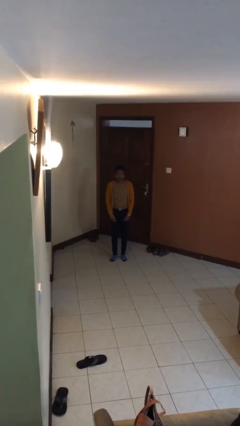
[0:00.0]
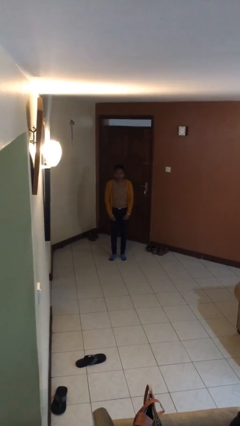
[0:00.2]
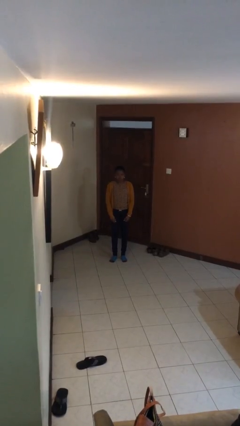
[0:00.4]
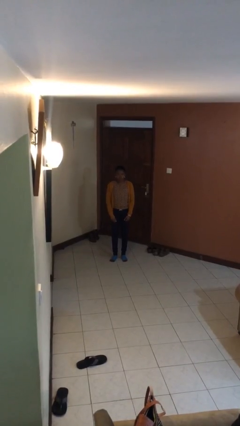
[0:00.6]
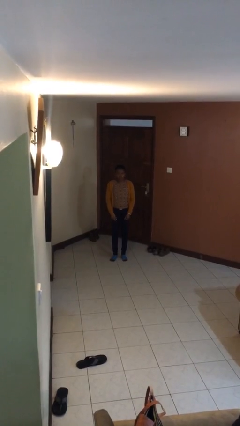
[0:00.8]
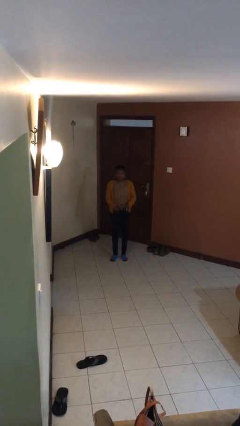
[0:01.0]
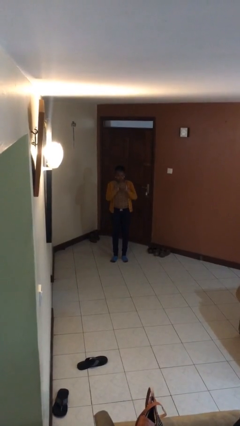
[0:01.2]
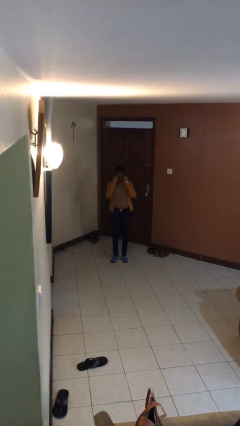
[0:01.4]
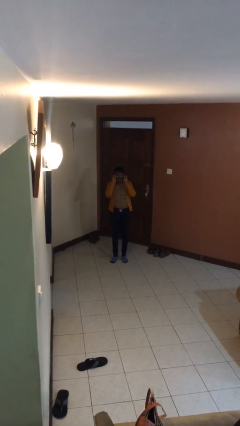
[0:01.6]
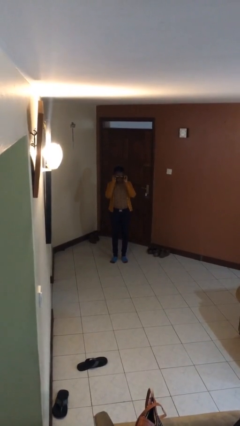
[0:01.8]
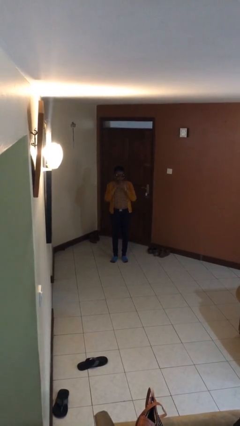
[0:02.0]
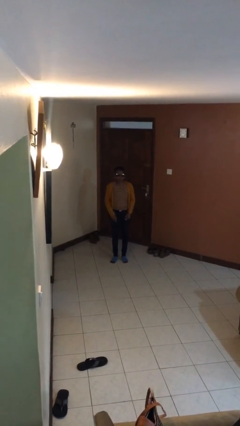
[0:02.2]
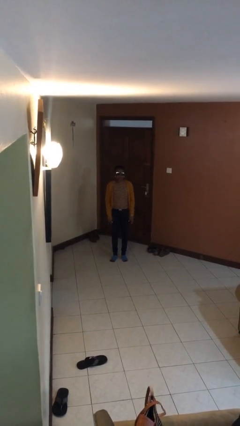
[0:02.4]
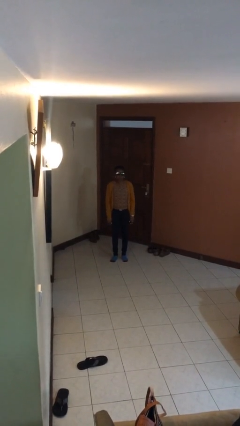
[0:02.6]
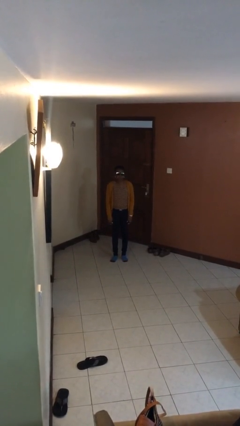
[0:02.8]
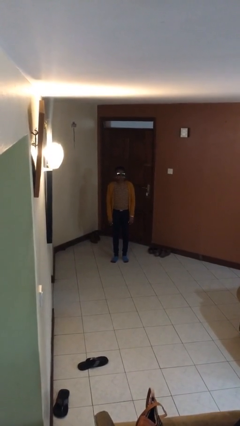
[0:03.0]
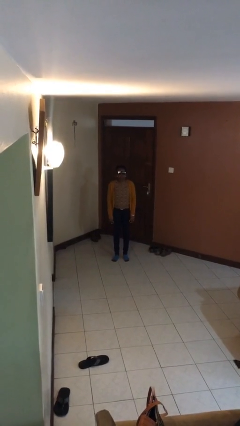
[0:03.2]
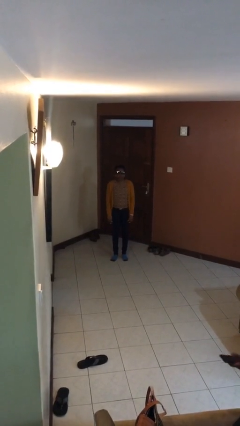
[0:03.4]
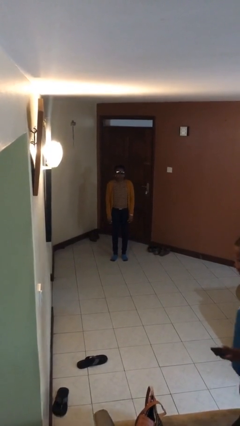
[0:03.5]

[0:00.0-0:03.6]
person puts on sunglasses

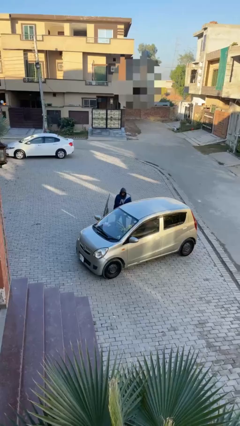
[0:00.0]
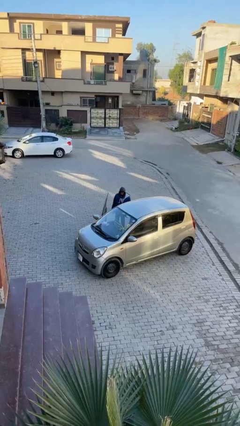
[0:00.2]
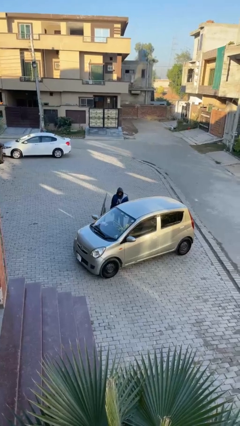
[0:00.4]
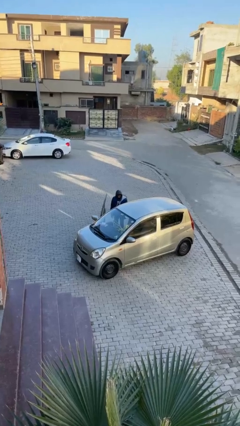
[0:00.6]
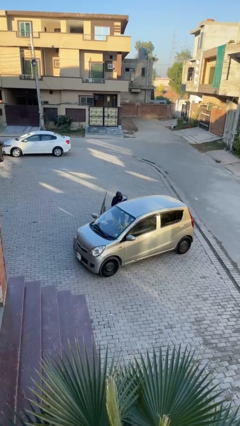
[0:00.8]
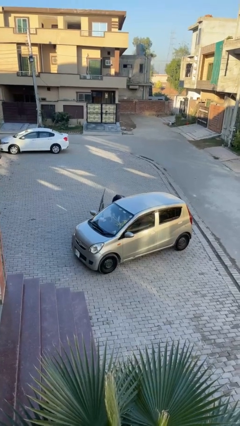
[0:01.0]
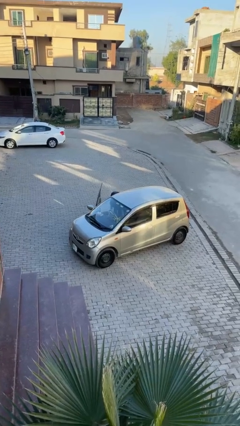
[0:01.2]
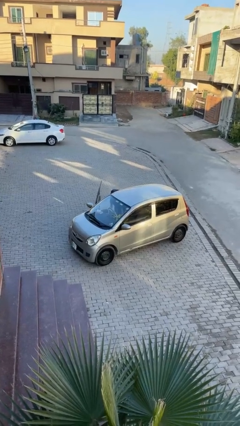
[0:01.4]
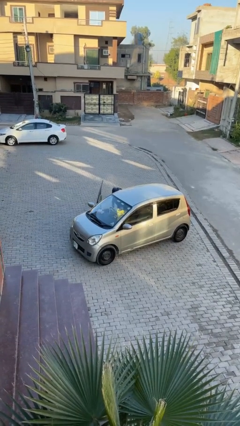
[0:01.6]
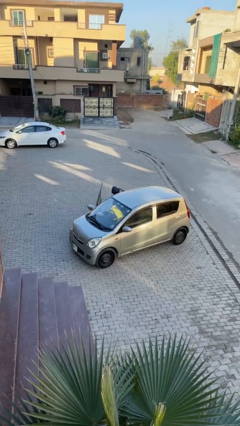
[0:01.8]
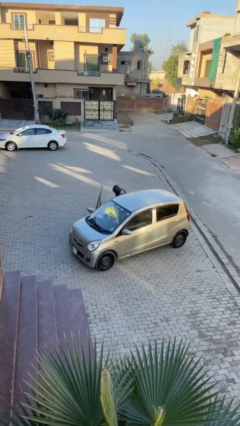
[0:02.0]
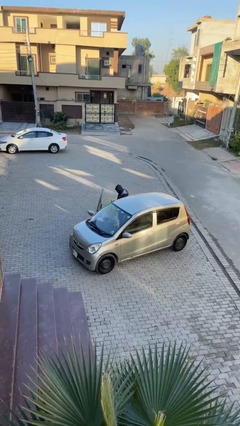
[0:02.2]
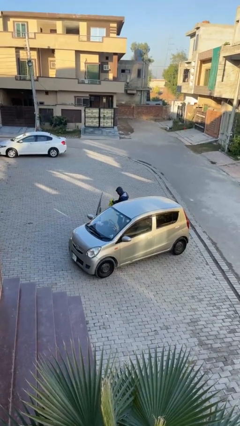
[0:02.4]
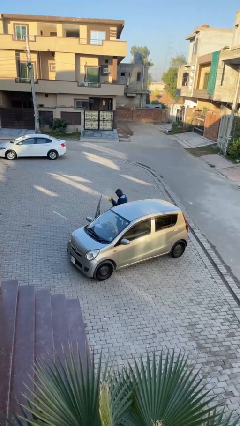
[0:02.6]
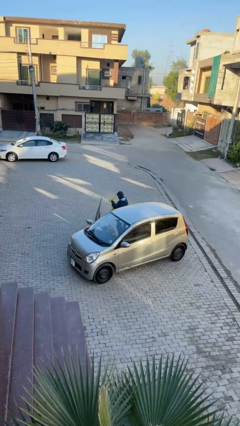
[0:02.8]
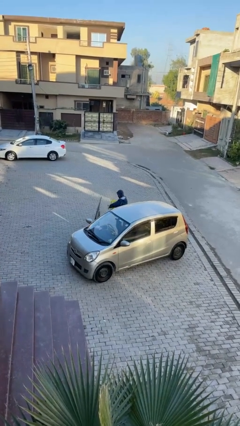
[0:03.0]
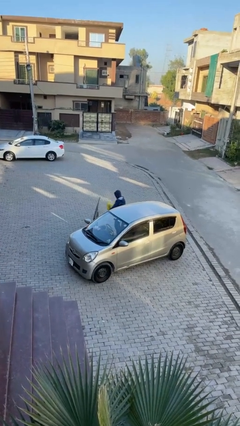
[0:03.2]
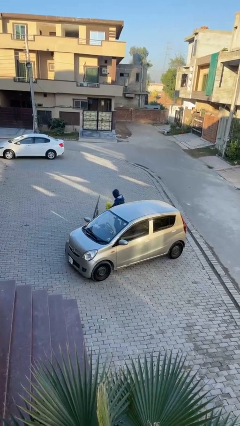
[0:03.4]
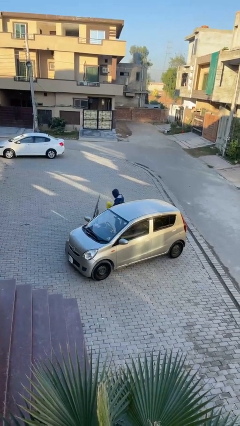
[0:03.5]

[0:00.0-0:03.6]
person unloads car

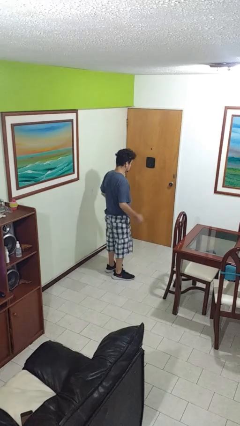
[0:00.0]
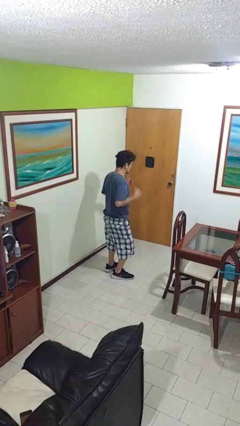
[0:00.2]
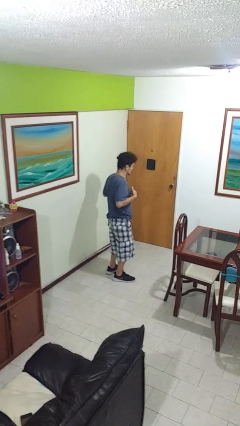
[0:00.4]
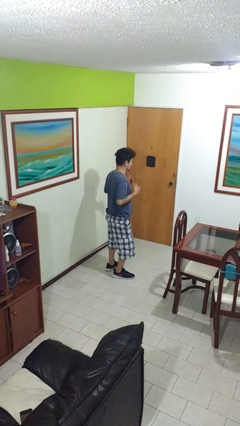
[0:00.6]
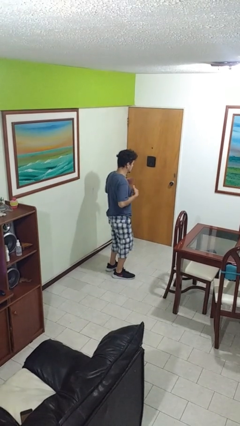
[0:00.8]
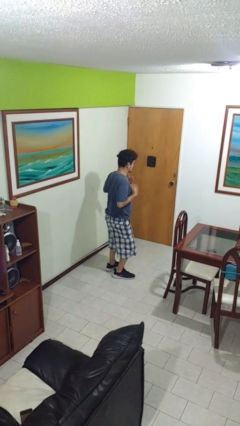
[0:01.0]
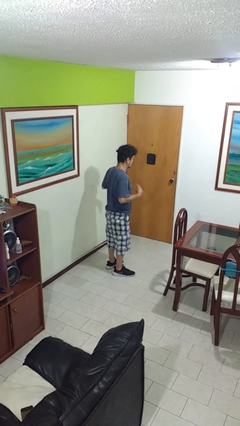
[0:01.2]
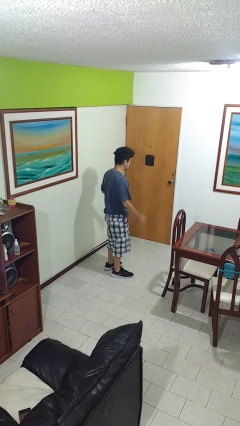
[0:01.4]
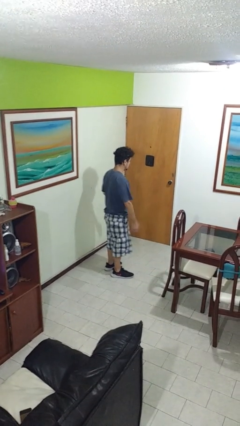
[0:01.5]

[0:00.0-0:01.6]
person drums on chest

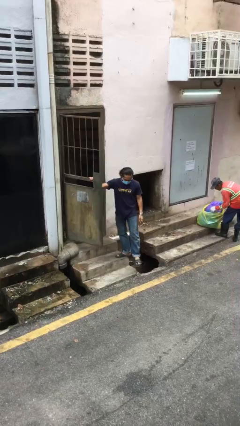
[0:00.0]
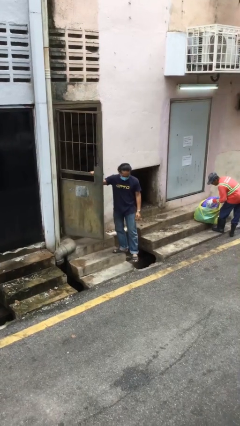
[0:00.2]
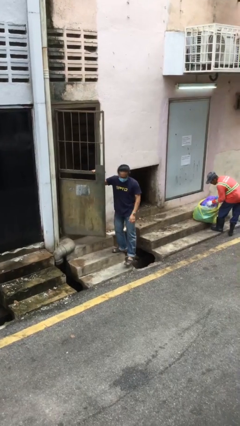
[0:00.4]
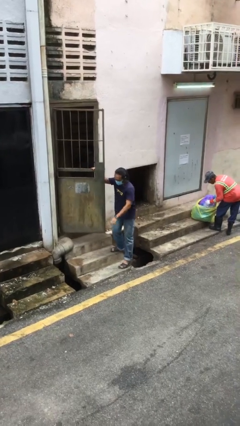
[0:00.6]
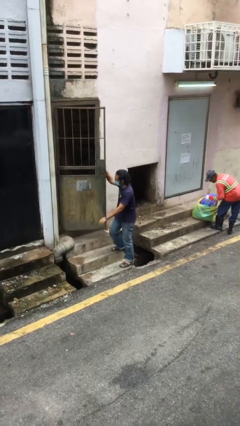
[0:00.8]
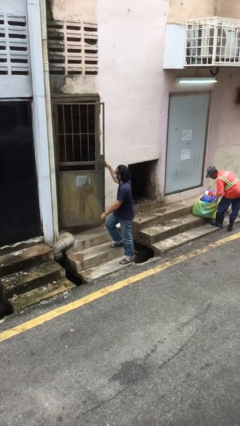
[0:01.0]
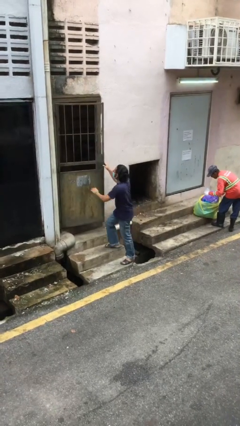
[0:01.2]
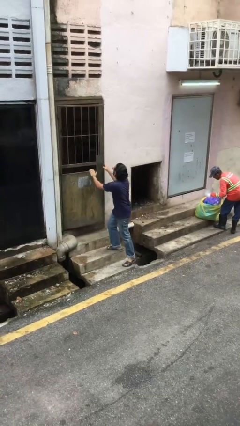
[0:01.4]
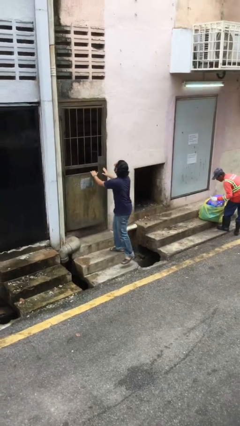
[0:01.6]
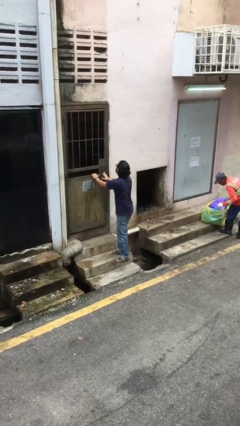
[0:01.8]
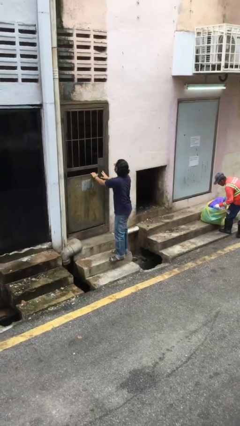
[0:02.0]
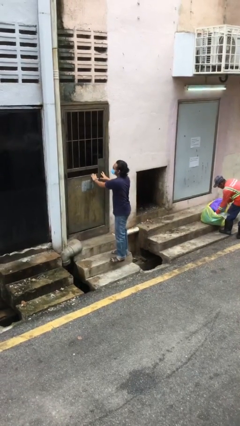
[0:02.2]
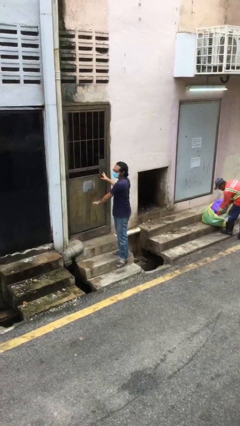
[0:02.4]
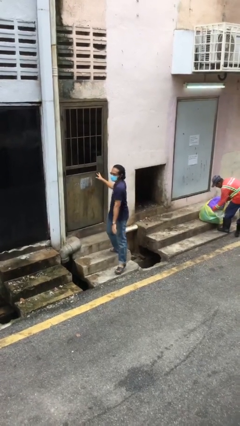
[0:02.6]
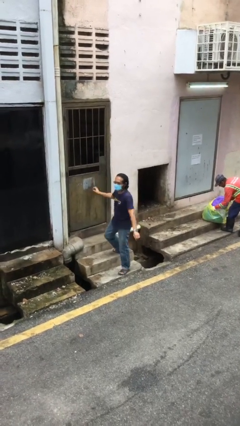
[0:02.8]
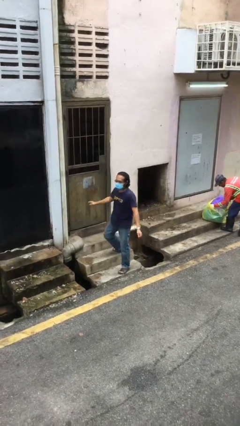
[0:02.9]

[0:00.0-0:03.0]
person closes facility door

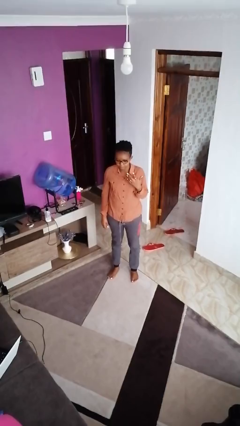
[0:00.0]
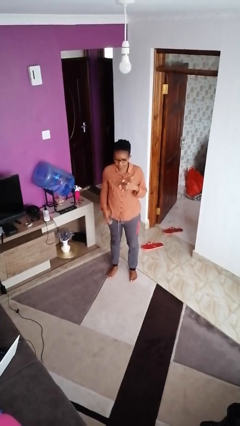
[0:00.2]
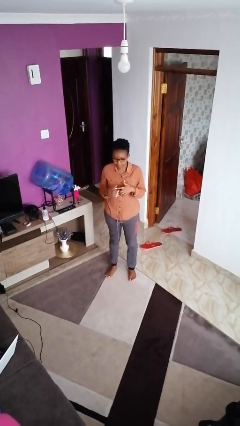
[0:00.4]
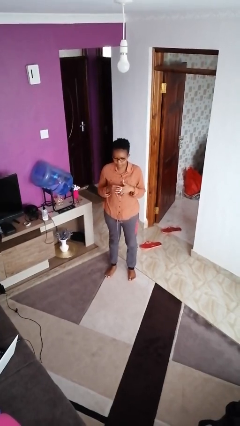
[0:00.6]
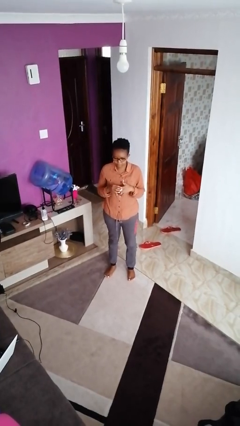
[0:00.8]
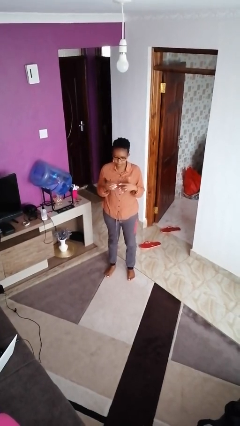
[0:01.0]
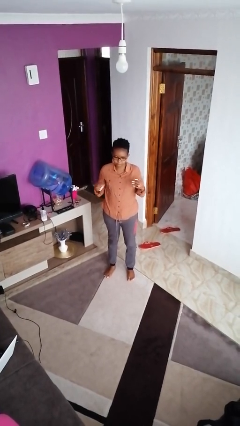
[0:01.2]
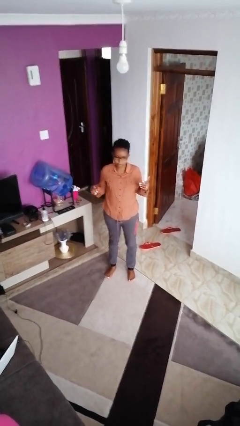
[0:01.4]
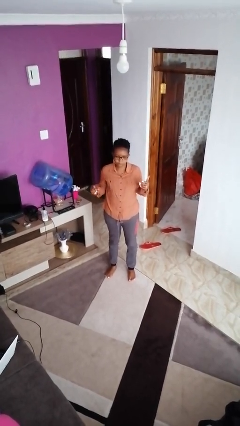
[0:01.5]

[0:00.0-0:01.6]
person takes off ring

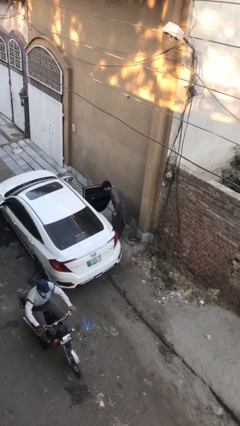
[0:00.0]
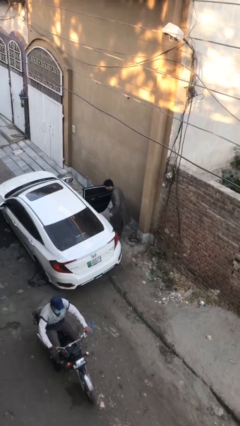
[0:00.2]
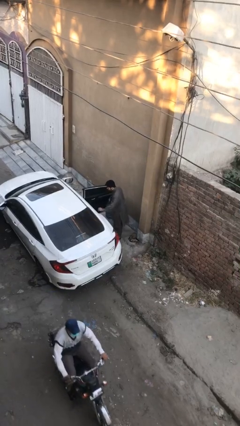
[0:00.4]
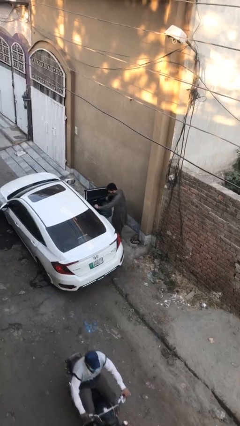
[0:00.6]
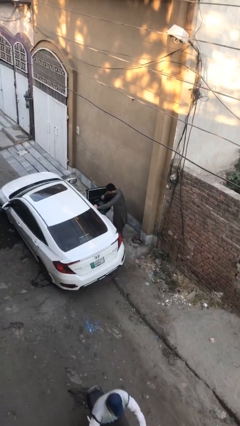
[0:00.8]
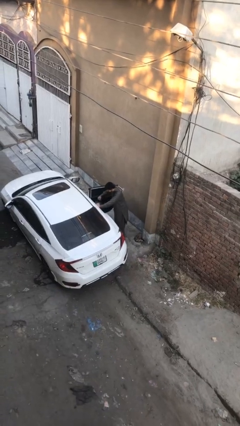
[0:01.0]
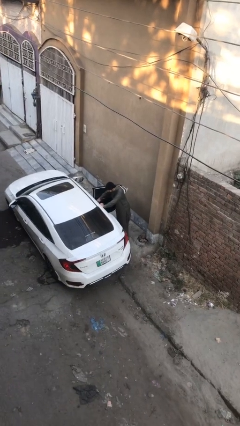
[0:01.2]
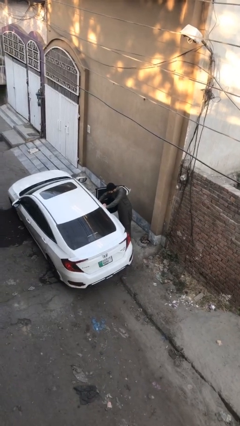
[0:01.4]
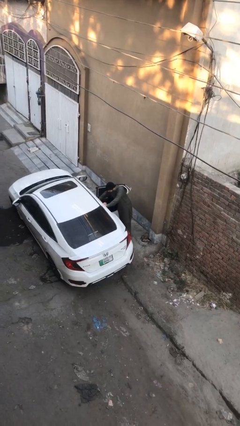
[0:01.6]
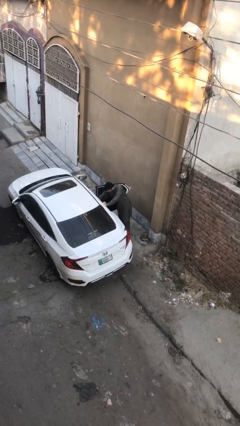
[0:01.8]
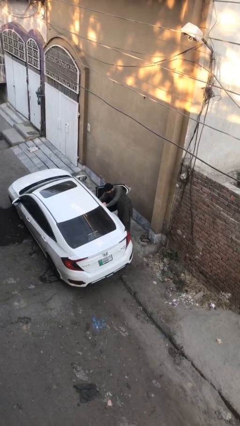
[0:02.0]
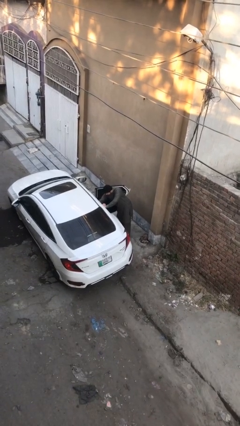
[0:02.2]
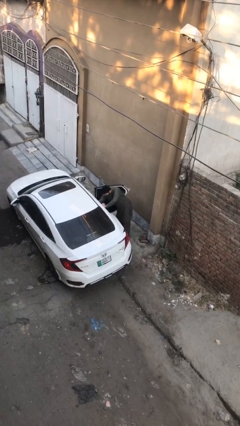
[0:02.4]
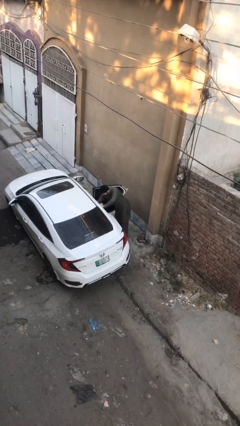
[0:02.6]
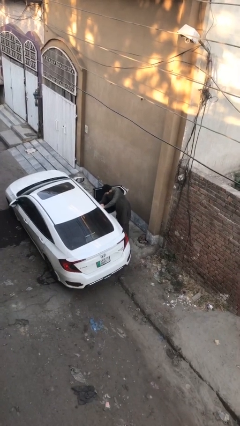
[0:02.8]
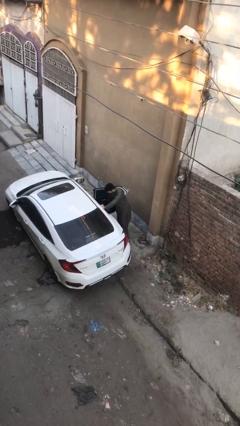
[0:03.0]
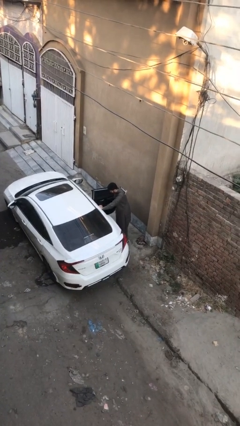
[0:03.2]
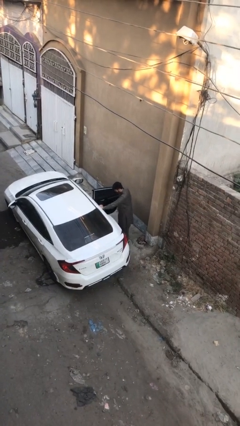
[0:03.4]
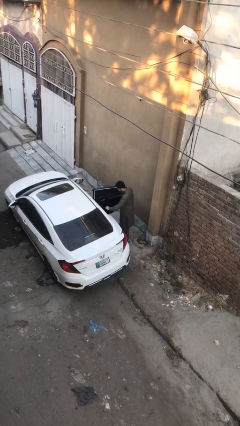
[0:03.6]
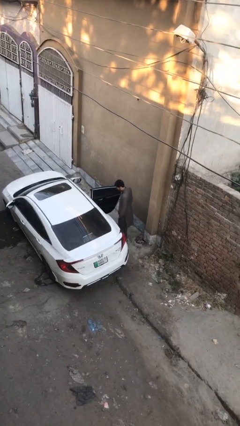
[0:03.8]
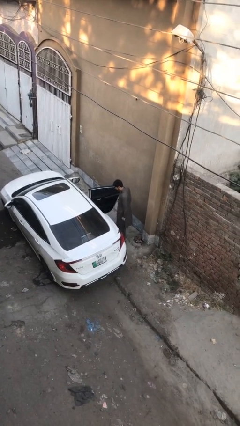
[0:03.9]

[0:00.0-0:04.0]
person loads car
